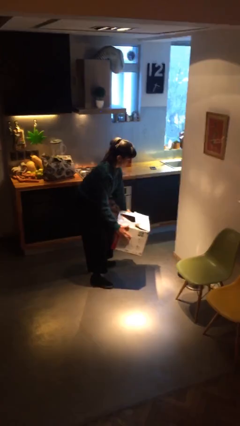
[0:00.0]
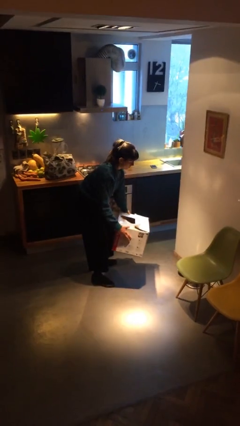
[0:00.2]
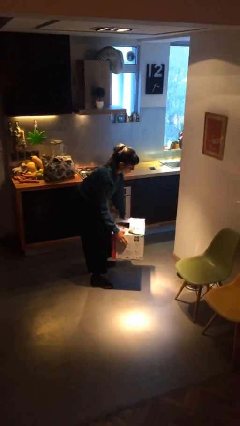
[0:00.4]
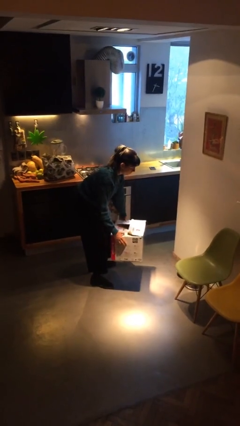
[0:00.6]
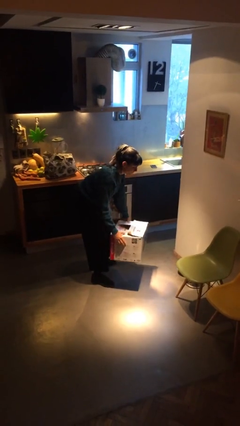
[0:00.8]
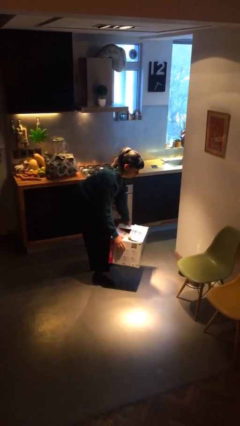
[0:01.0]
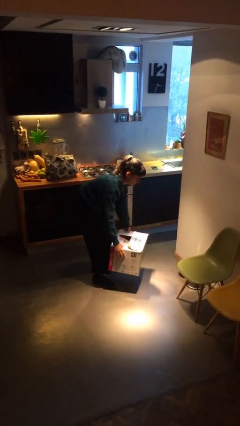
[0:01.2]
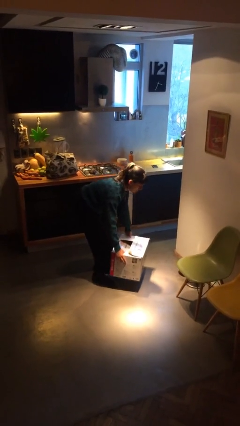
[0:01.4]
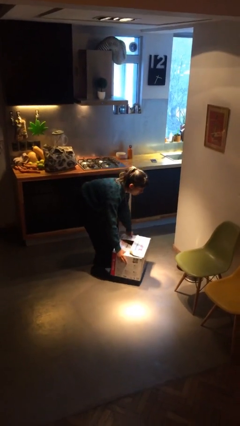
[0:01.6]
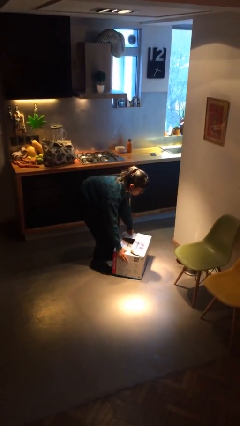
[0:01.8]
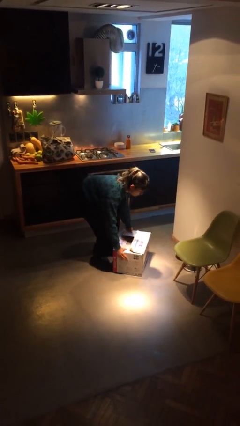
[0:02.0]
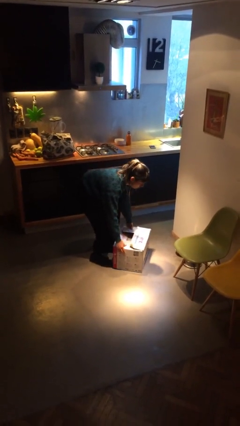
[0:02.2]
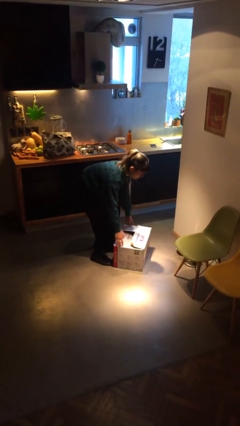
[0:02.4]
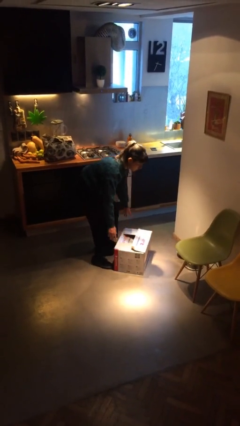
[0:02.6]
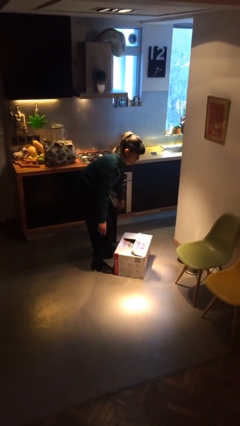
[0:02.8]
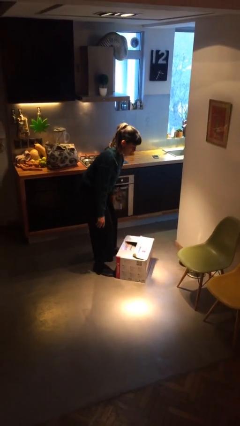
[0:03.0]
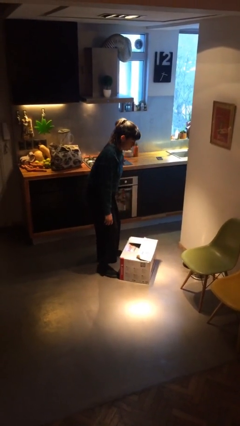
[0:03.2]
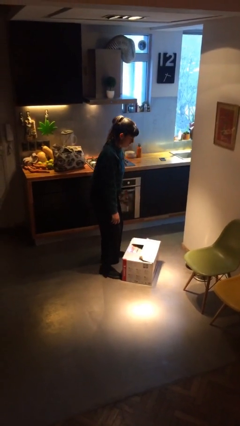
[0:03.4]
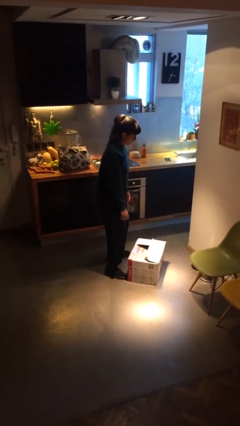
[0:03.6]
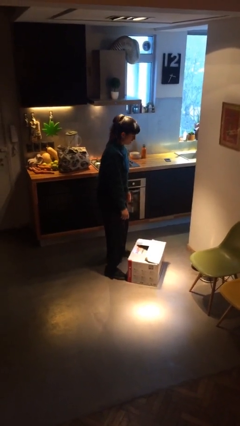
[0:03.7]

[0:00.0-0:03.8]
person puts down object on floor

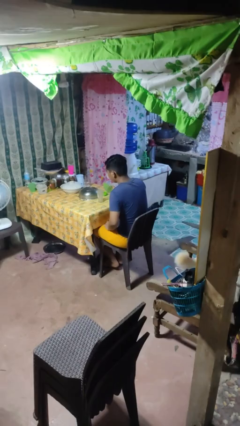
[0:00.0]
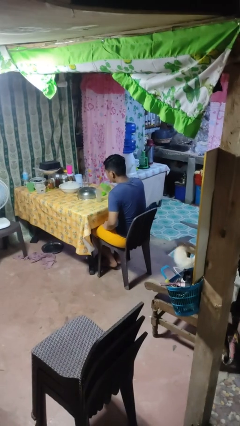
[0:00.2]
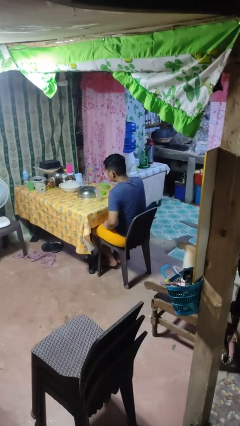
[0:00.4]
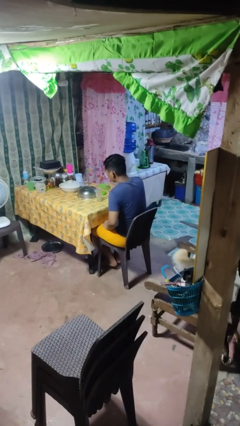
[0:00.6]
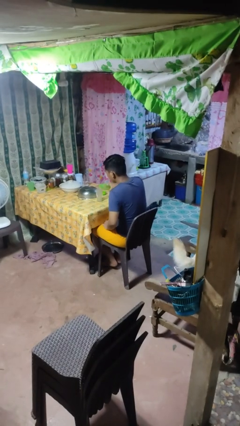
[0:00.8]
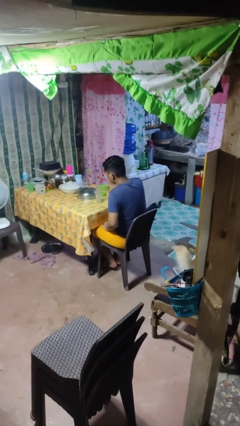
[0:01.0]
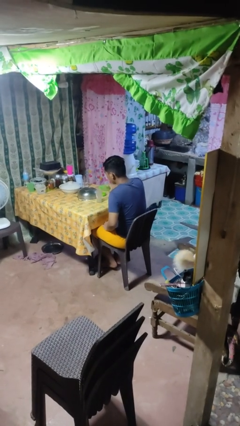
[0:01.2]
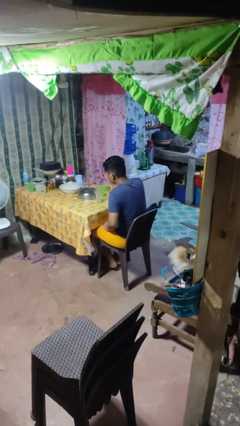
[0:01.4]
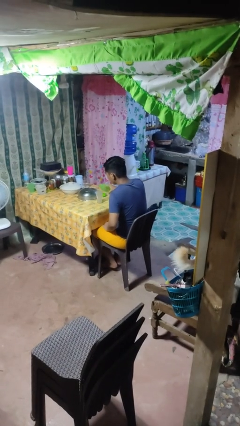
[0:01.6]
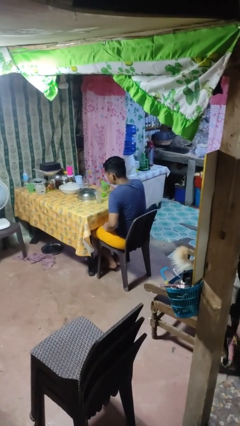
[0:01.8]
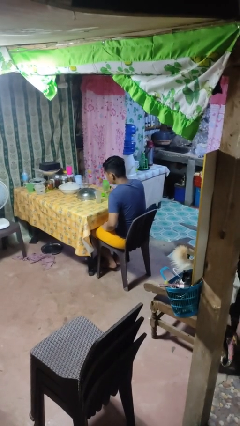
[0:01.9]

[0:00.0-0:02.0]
person pours liquid into cup

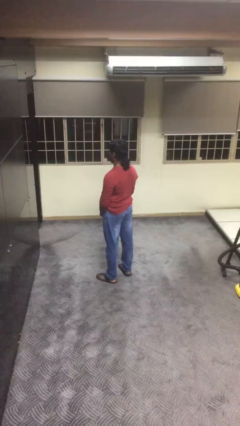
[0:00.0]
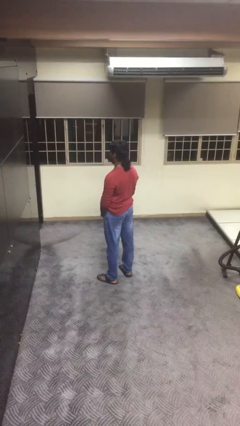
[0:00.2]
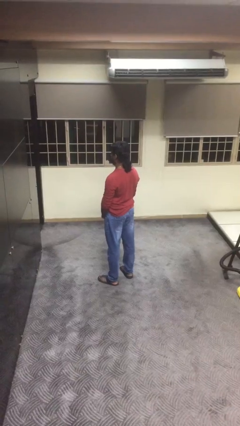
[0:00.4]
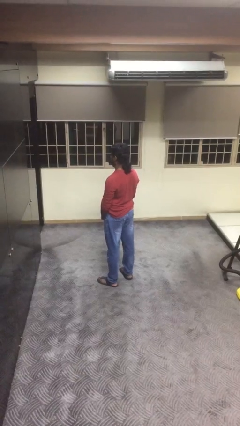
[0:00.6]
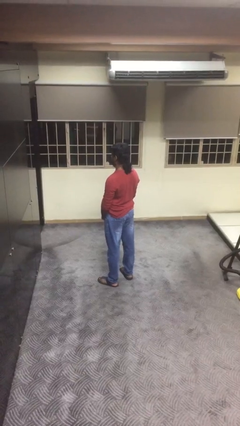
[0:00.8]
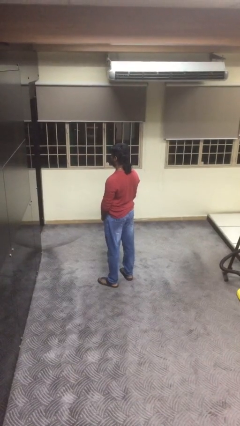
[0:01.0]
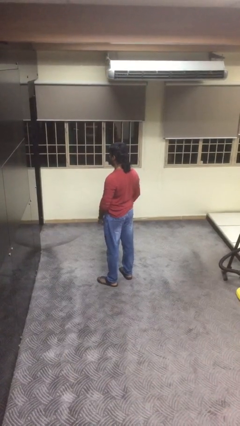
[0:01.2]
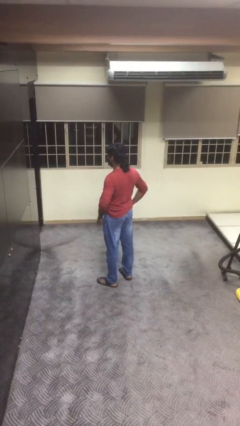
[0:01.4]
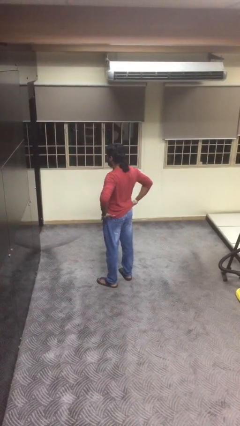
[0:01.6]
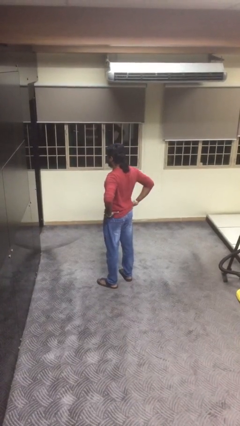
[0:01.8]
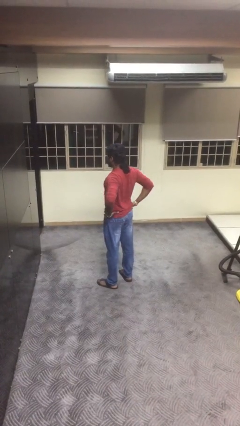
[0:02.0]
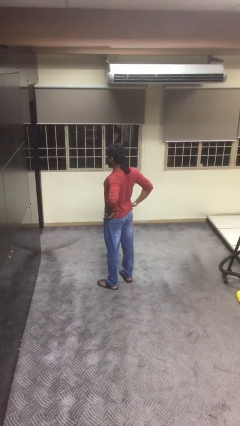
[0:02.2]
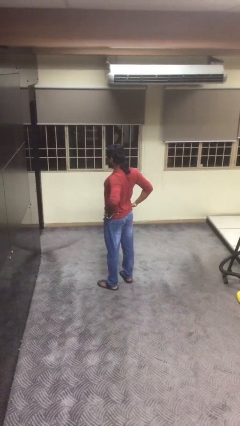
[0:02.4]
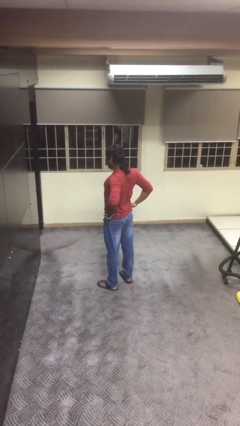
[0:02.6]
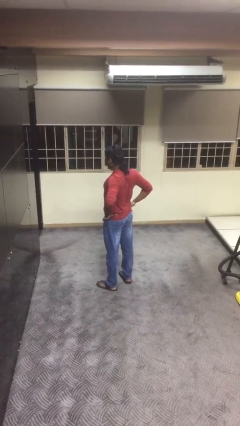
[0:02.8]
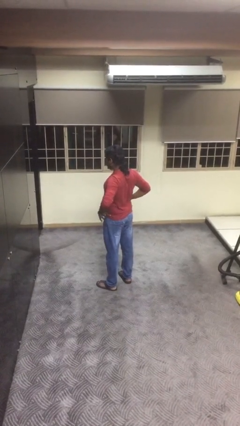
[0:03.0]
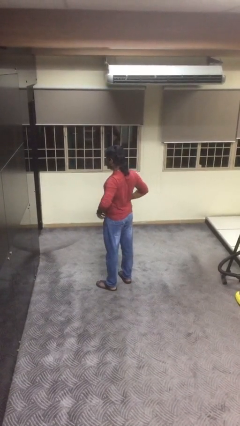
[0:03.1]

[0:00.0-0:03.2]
person stretches back

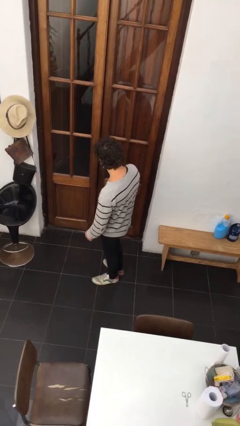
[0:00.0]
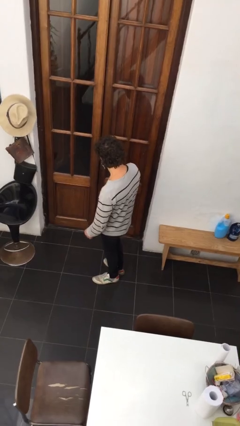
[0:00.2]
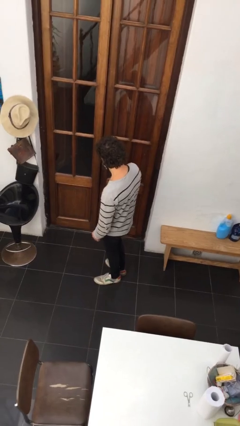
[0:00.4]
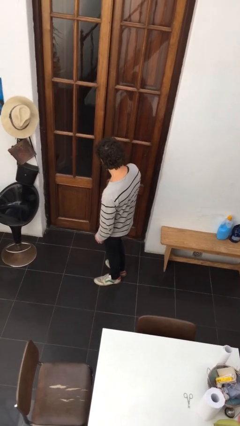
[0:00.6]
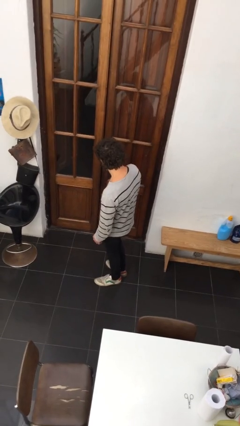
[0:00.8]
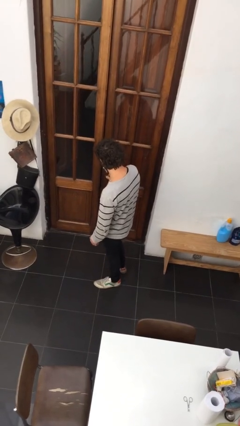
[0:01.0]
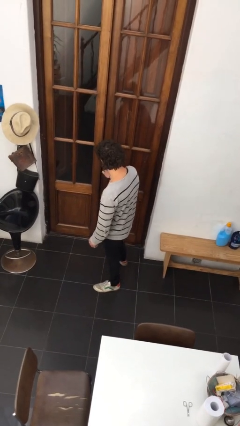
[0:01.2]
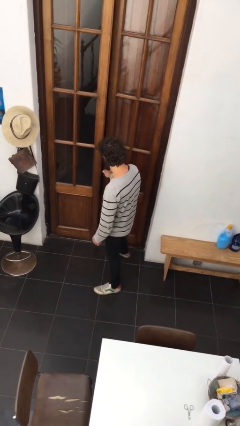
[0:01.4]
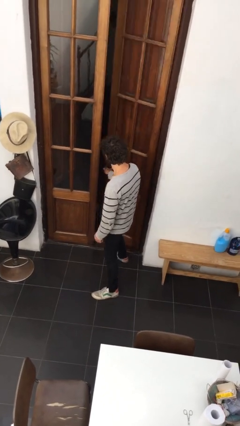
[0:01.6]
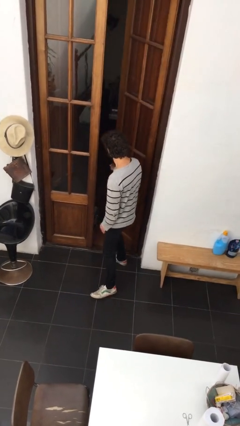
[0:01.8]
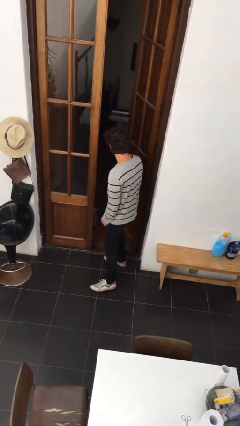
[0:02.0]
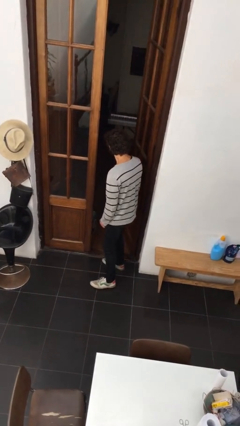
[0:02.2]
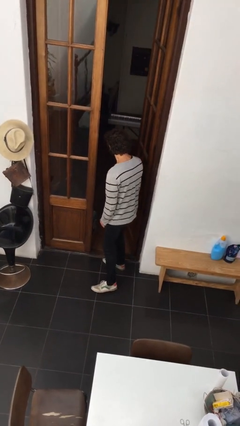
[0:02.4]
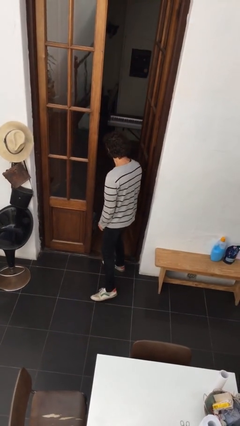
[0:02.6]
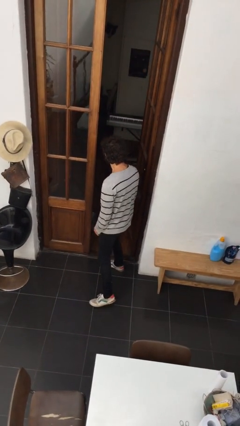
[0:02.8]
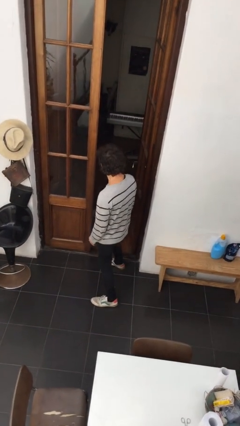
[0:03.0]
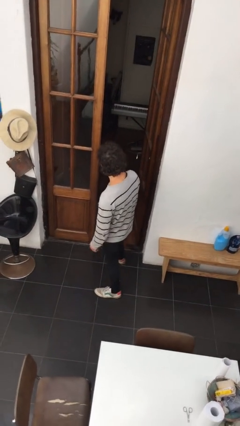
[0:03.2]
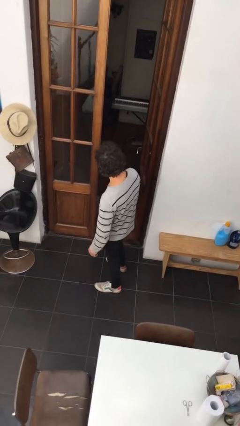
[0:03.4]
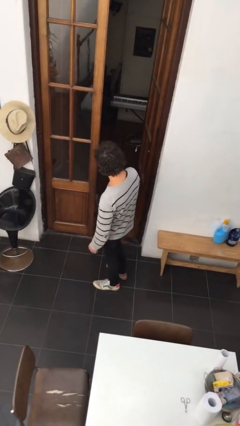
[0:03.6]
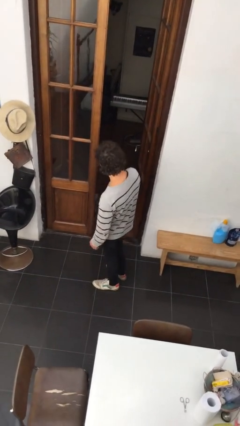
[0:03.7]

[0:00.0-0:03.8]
person opens facility door

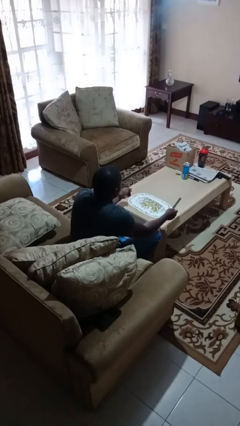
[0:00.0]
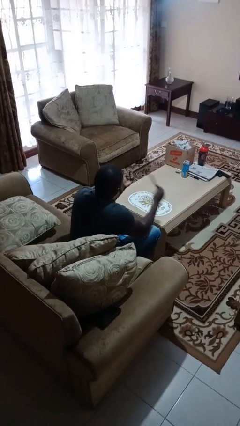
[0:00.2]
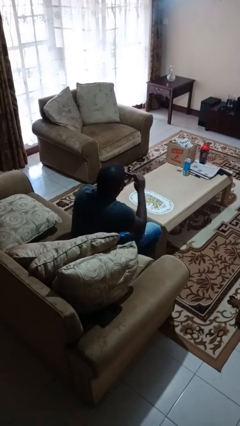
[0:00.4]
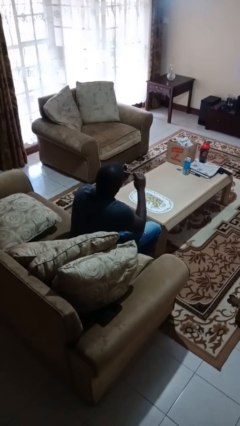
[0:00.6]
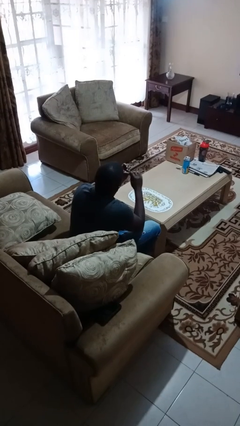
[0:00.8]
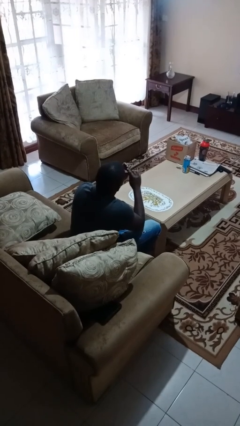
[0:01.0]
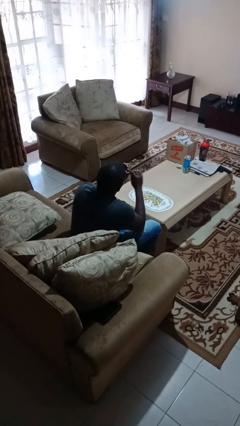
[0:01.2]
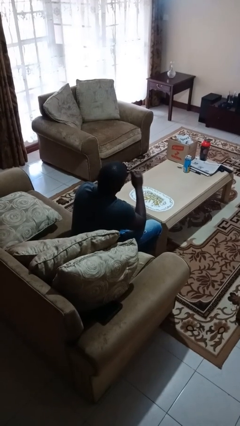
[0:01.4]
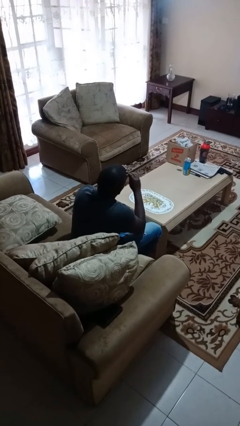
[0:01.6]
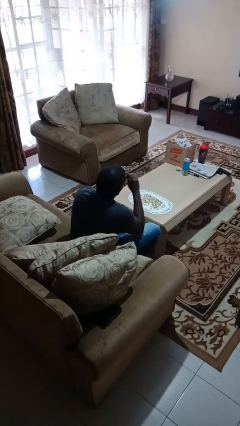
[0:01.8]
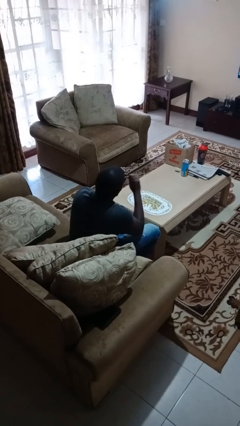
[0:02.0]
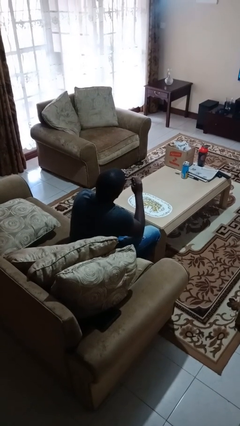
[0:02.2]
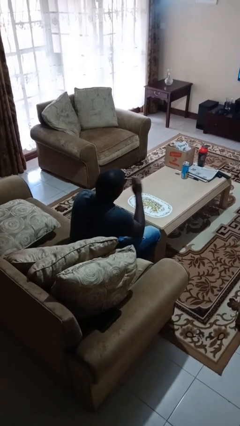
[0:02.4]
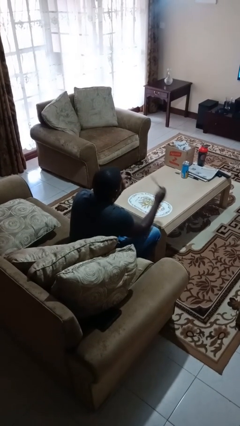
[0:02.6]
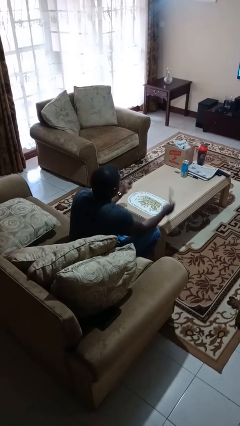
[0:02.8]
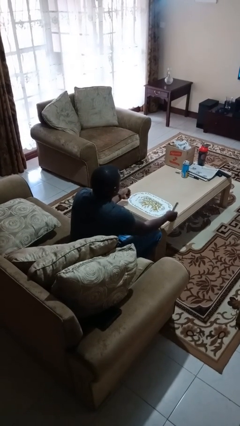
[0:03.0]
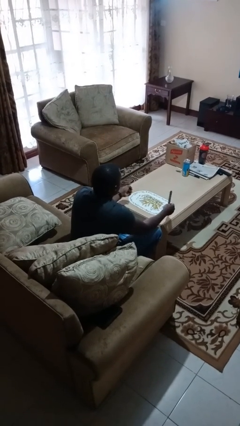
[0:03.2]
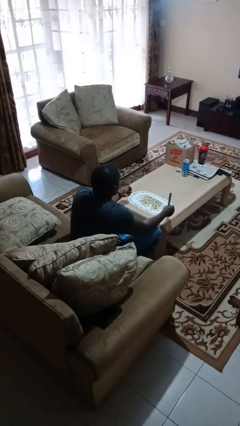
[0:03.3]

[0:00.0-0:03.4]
person files fingernails

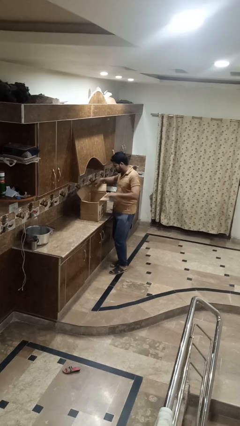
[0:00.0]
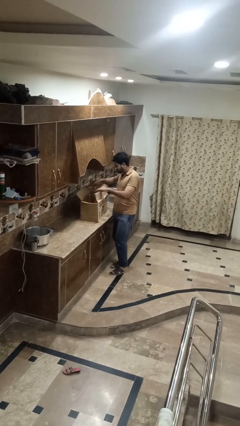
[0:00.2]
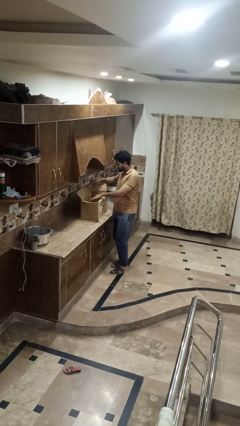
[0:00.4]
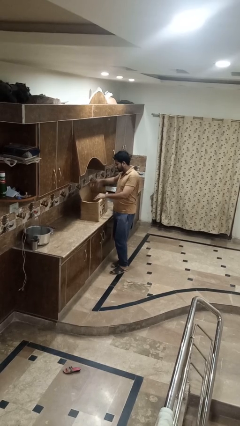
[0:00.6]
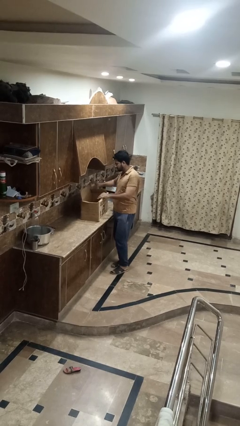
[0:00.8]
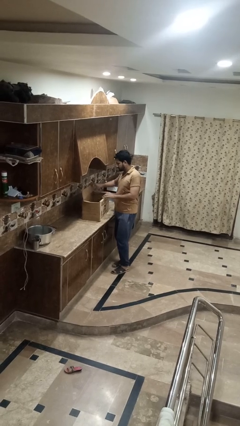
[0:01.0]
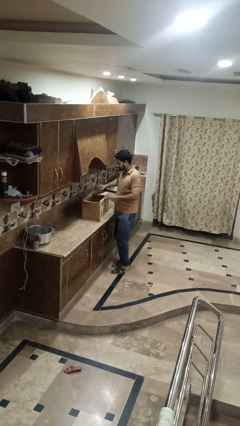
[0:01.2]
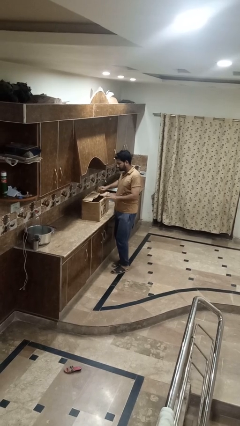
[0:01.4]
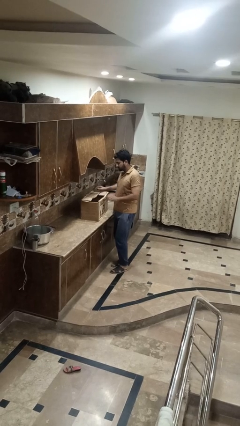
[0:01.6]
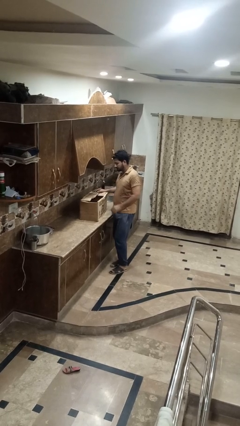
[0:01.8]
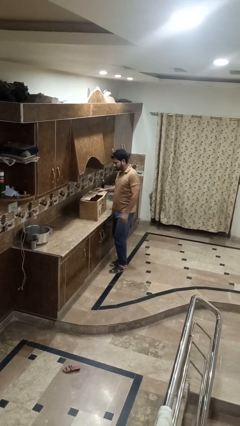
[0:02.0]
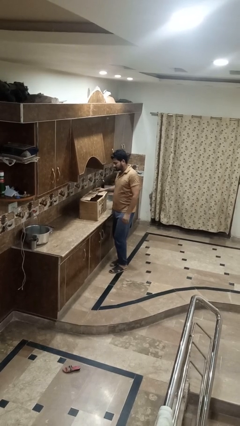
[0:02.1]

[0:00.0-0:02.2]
person closes box
